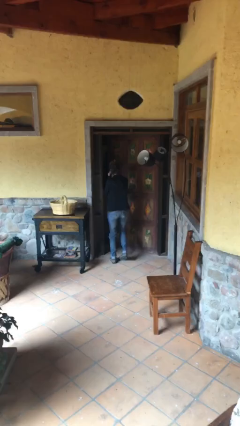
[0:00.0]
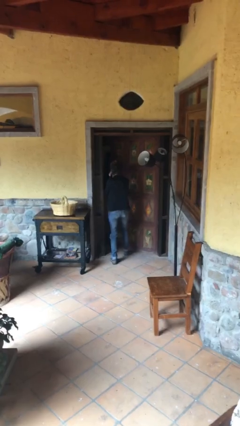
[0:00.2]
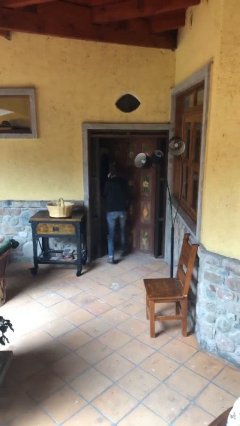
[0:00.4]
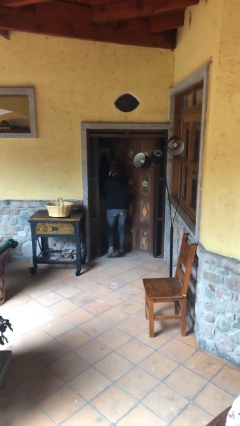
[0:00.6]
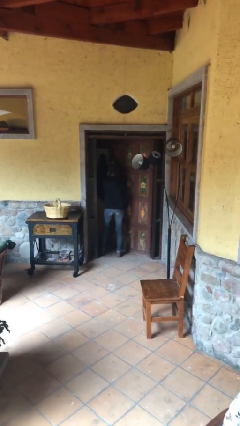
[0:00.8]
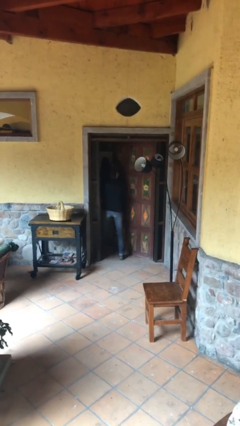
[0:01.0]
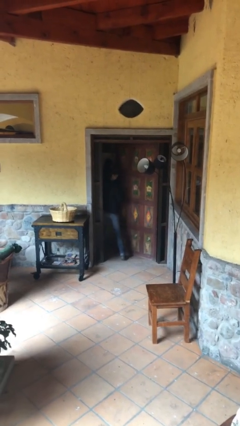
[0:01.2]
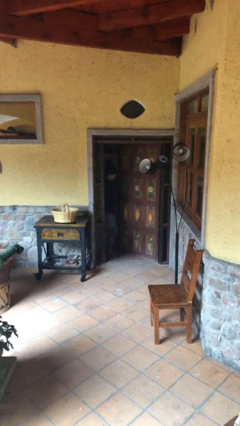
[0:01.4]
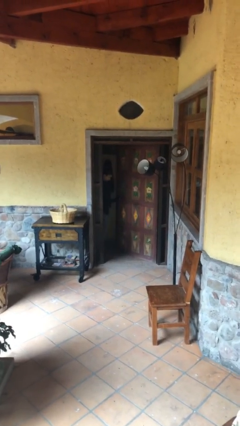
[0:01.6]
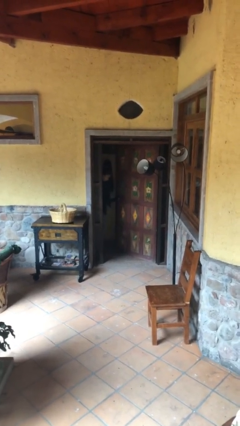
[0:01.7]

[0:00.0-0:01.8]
person exits scene through structure

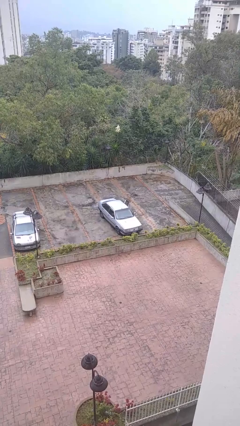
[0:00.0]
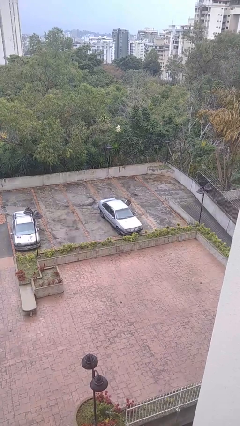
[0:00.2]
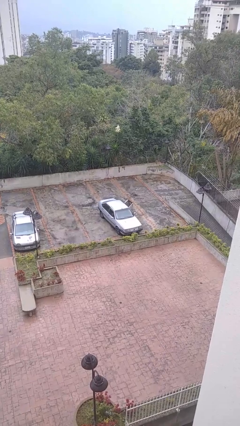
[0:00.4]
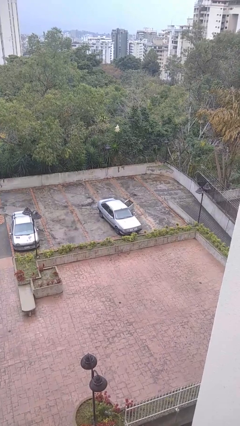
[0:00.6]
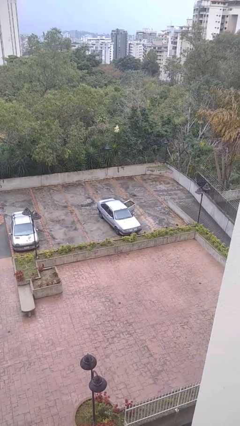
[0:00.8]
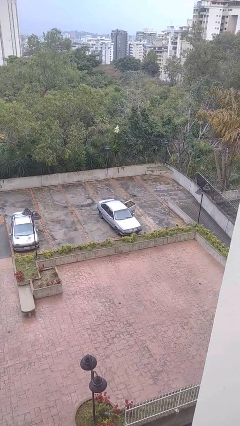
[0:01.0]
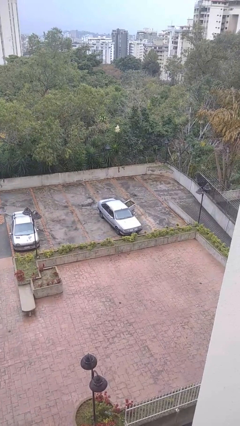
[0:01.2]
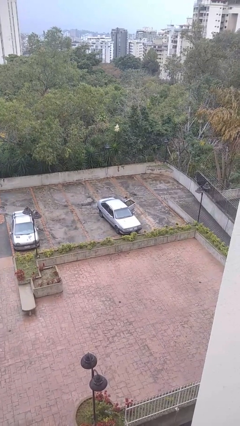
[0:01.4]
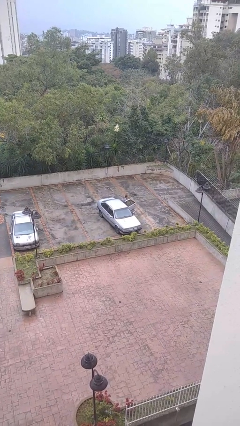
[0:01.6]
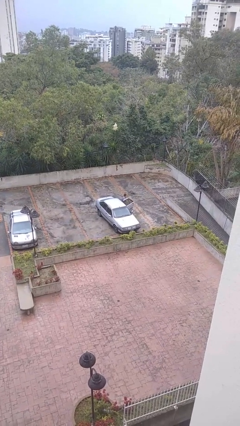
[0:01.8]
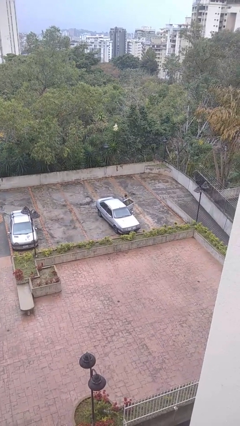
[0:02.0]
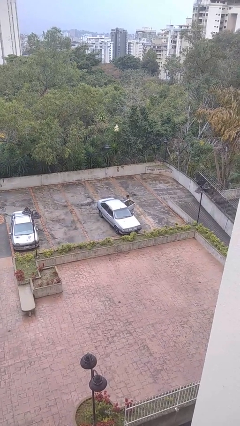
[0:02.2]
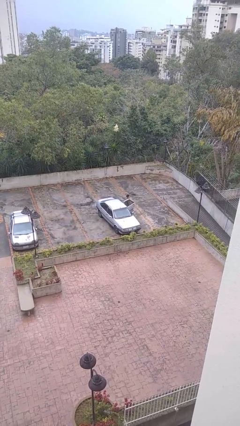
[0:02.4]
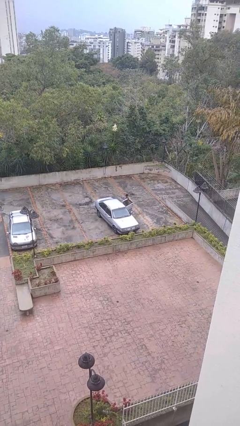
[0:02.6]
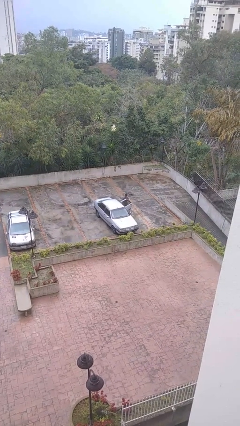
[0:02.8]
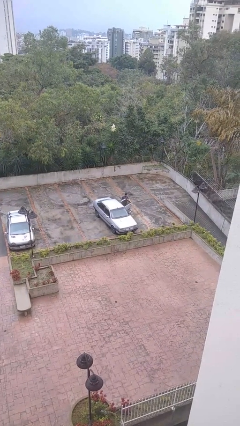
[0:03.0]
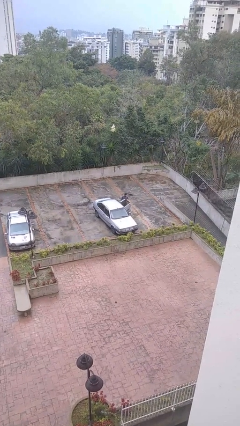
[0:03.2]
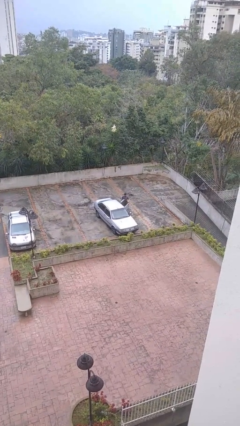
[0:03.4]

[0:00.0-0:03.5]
car drops off person

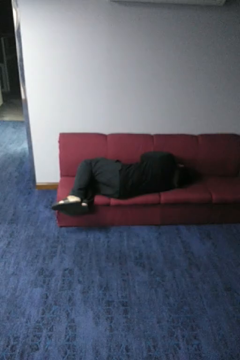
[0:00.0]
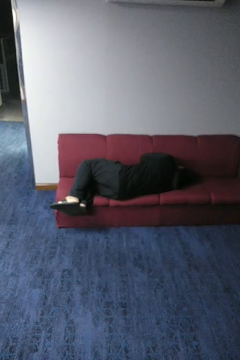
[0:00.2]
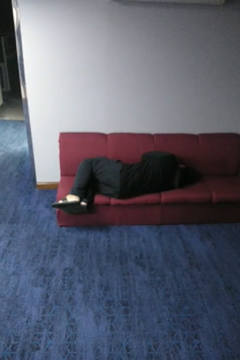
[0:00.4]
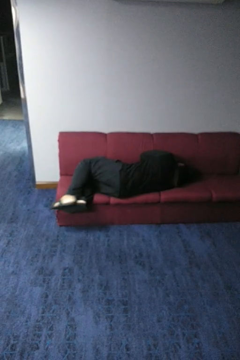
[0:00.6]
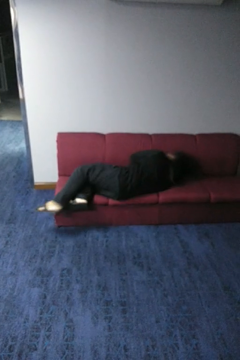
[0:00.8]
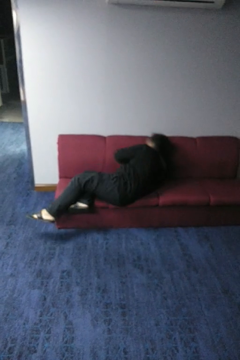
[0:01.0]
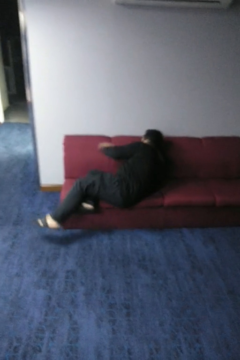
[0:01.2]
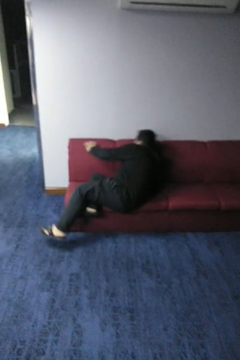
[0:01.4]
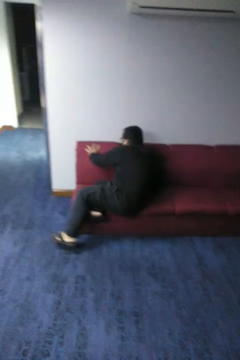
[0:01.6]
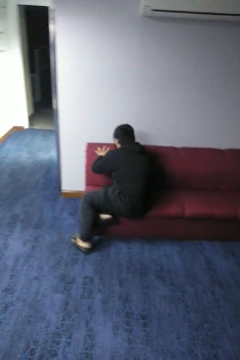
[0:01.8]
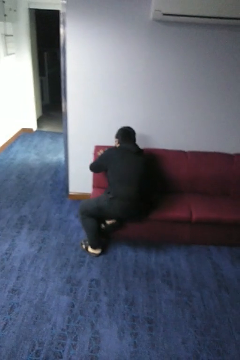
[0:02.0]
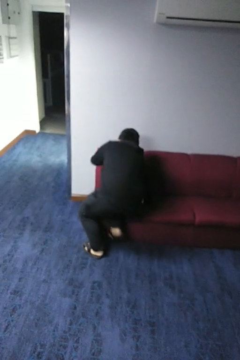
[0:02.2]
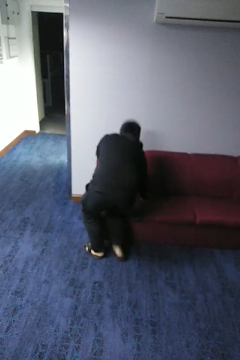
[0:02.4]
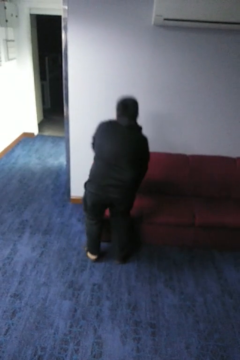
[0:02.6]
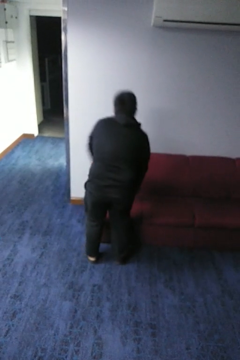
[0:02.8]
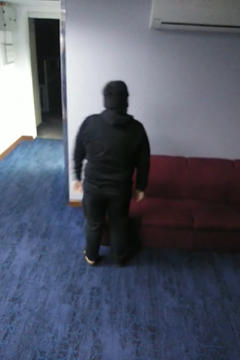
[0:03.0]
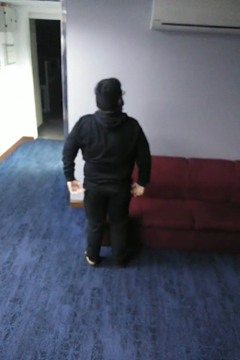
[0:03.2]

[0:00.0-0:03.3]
person stands up

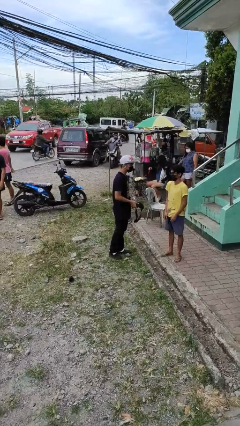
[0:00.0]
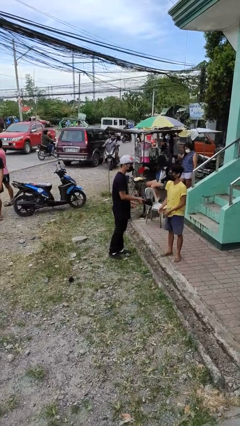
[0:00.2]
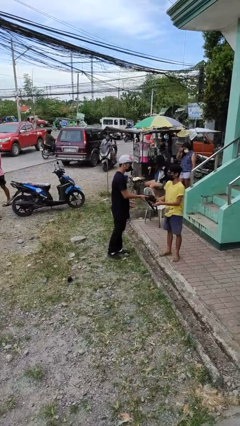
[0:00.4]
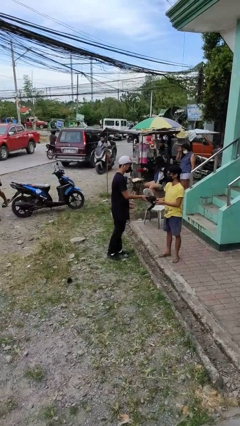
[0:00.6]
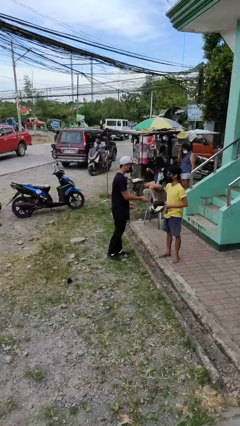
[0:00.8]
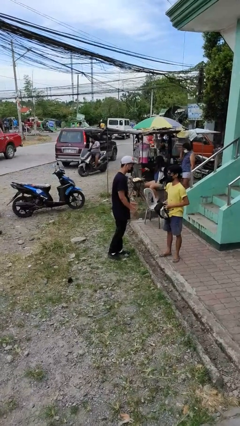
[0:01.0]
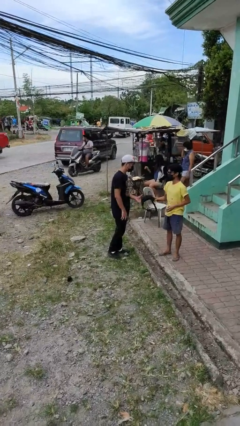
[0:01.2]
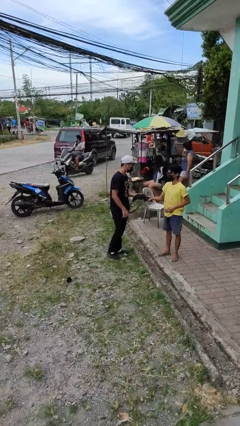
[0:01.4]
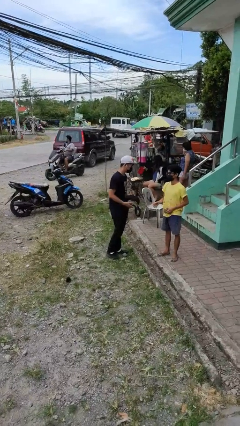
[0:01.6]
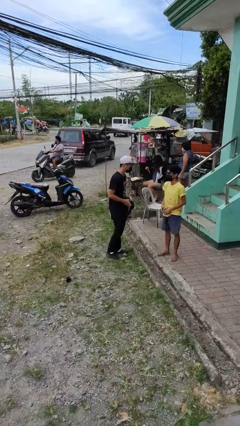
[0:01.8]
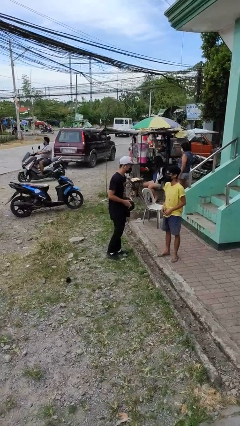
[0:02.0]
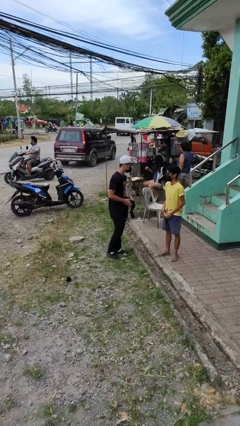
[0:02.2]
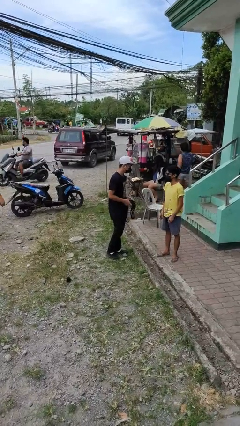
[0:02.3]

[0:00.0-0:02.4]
person transfers object to person

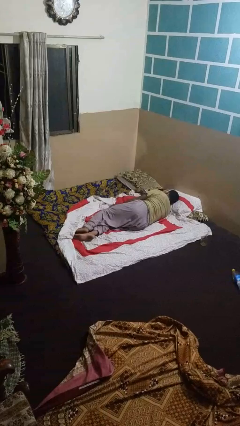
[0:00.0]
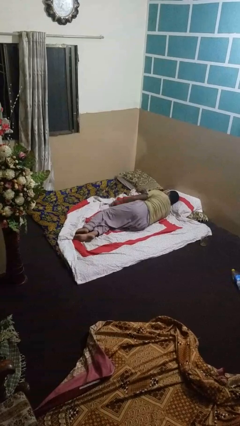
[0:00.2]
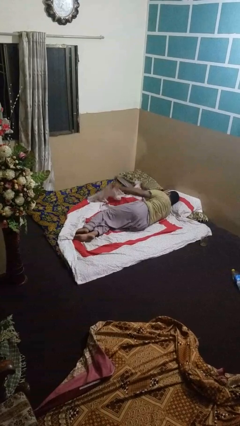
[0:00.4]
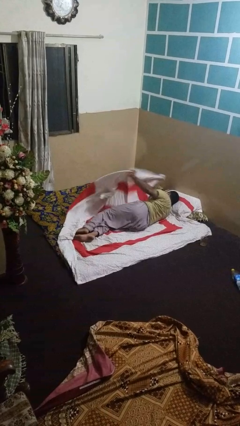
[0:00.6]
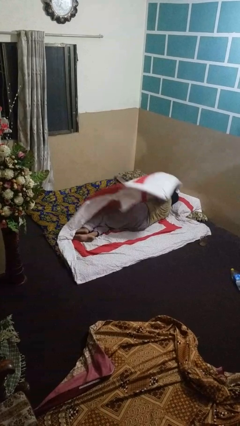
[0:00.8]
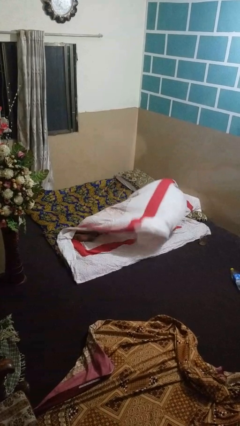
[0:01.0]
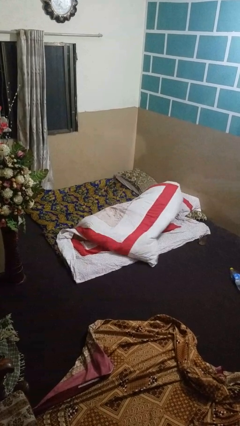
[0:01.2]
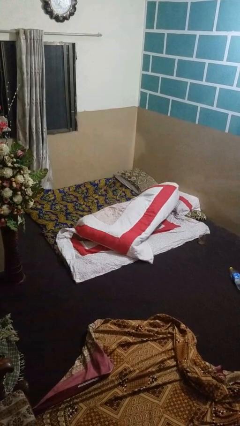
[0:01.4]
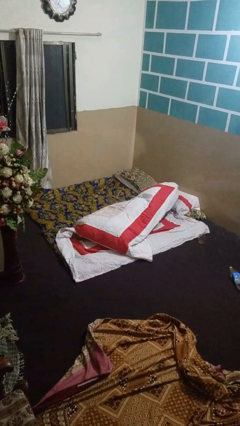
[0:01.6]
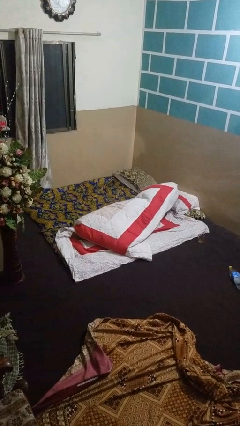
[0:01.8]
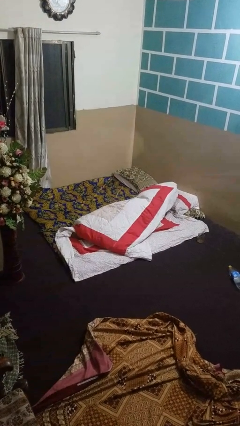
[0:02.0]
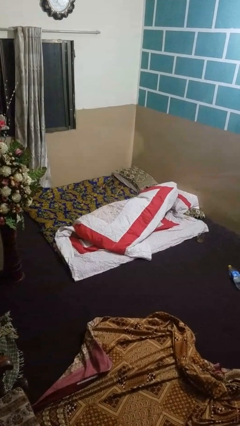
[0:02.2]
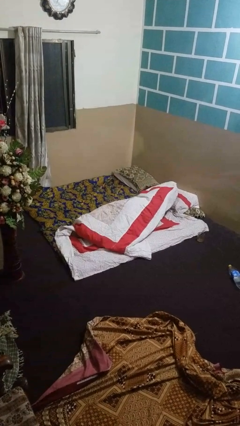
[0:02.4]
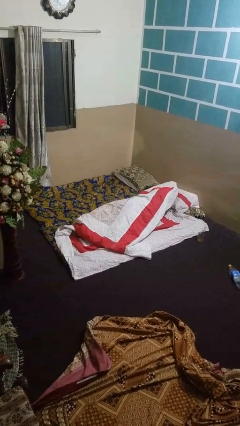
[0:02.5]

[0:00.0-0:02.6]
person covers with bedsheets

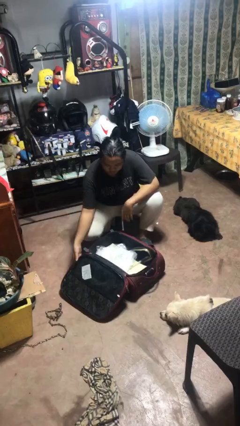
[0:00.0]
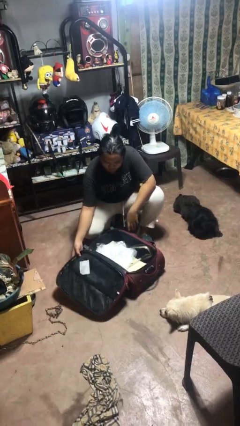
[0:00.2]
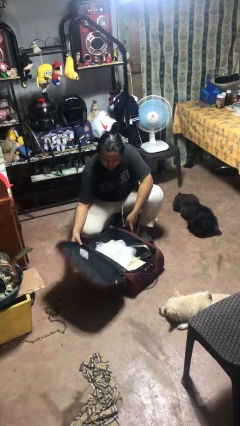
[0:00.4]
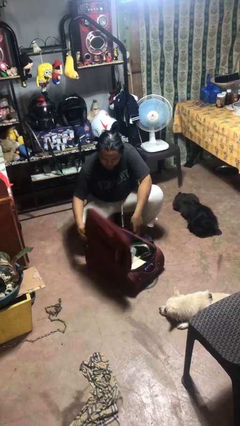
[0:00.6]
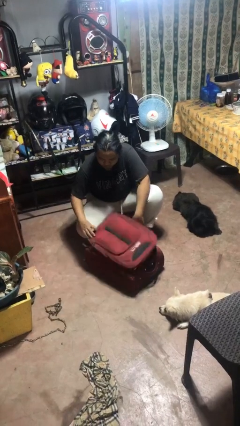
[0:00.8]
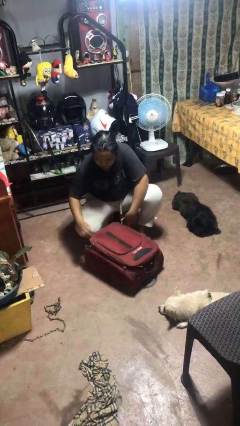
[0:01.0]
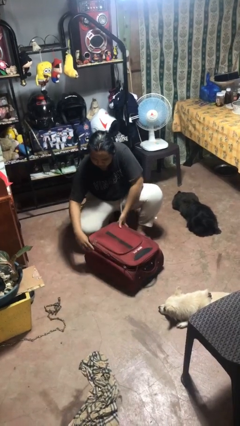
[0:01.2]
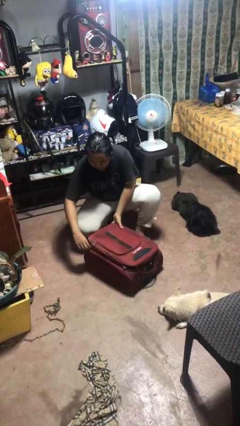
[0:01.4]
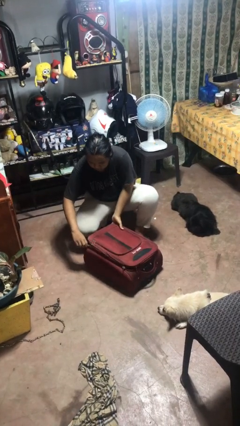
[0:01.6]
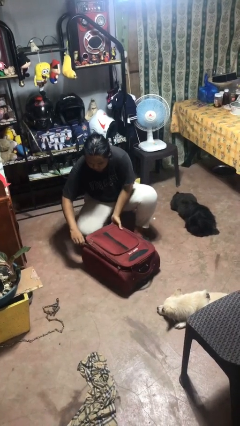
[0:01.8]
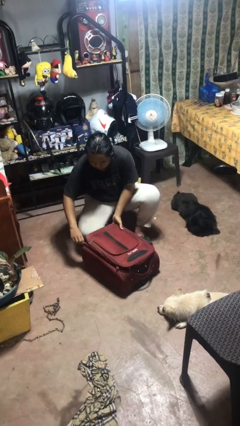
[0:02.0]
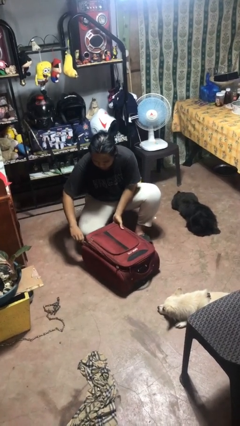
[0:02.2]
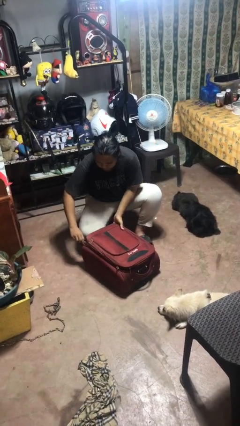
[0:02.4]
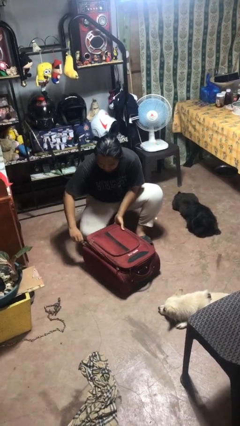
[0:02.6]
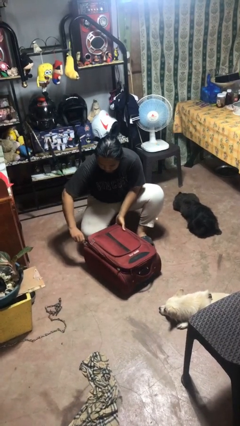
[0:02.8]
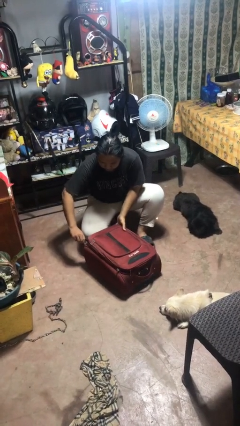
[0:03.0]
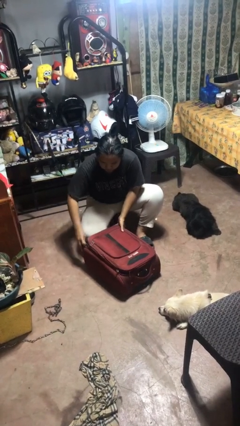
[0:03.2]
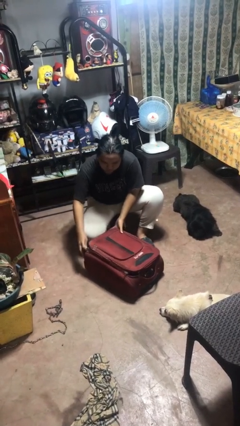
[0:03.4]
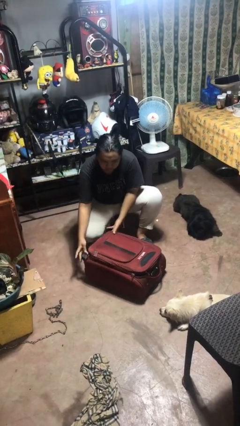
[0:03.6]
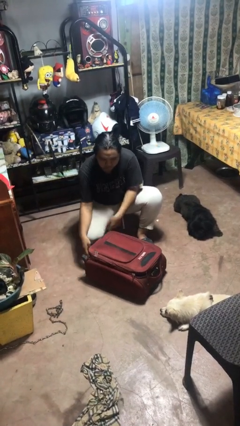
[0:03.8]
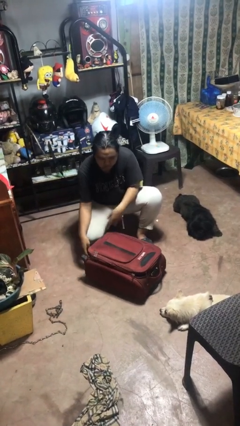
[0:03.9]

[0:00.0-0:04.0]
person closes suitcase

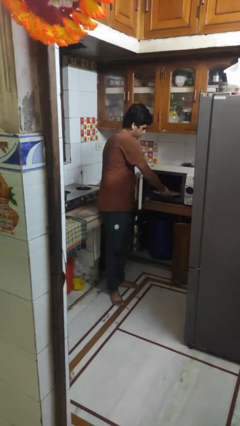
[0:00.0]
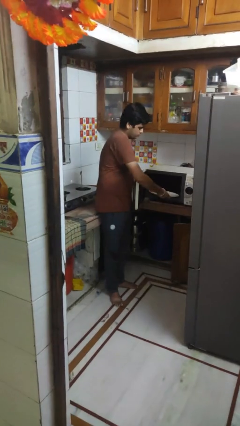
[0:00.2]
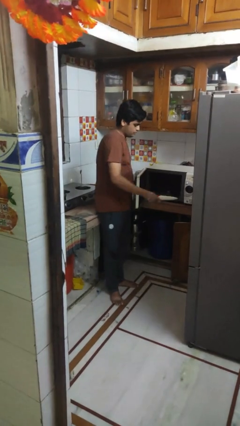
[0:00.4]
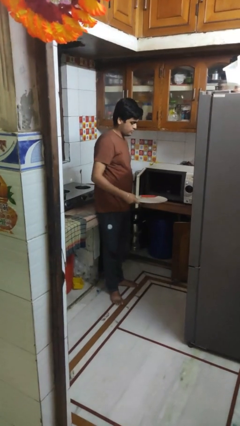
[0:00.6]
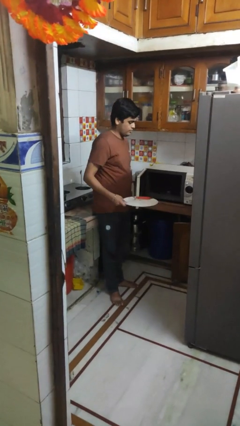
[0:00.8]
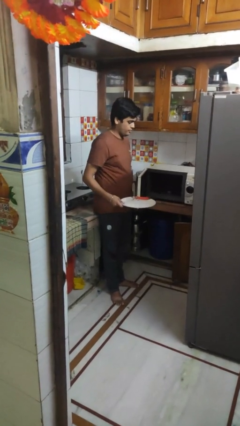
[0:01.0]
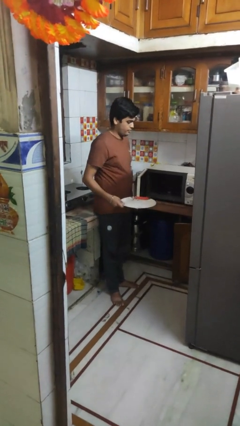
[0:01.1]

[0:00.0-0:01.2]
person takes object from microwave
